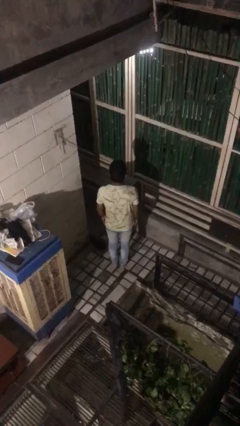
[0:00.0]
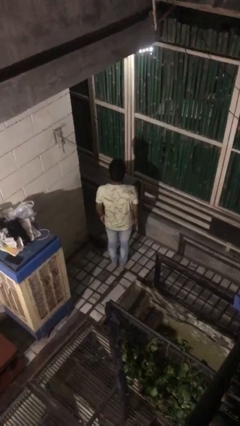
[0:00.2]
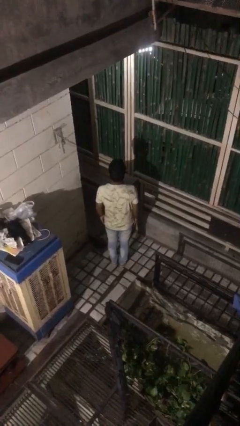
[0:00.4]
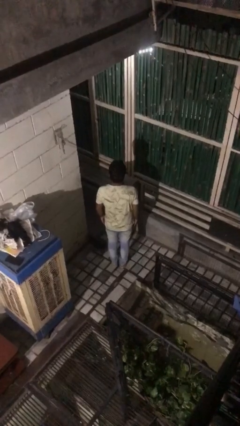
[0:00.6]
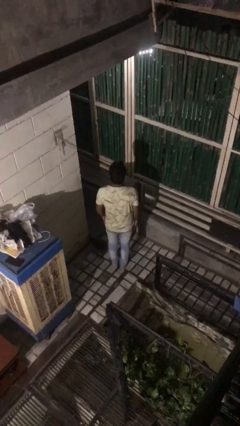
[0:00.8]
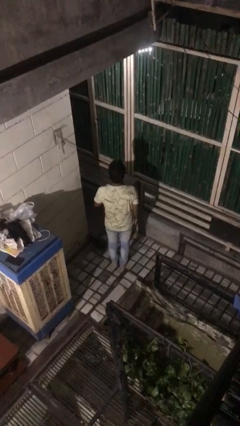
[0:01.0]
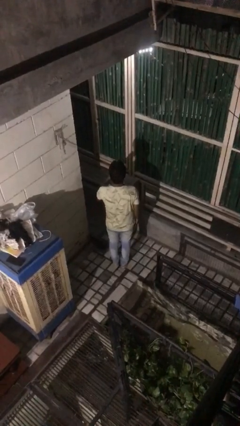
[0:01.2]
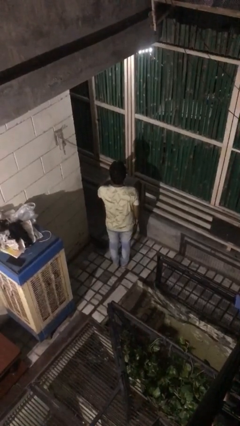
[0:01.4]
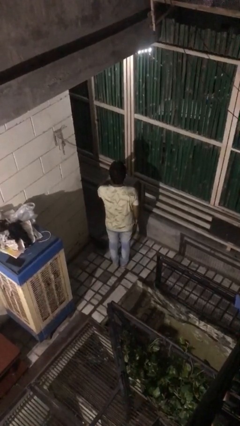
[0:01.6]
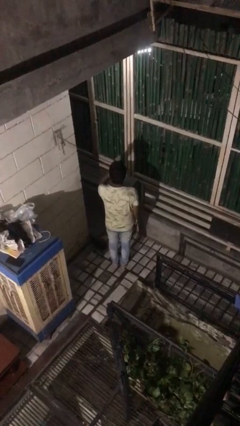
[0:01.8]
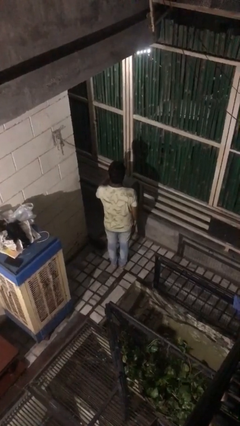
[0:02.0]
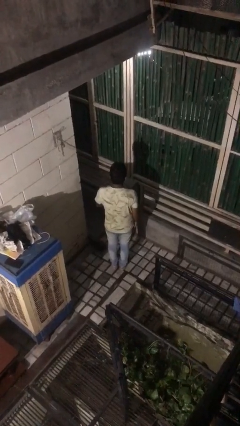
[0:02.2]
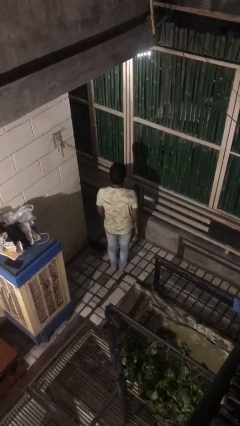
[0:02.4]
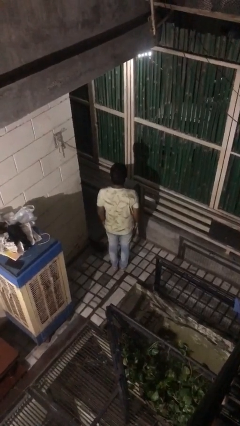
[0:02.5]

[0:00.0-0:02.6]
person gestures blow kiss

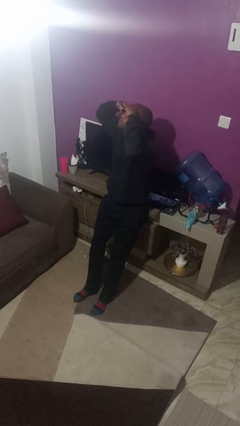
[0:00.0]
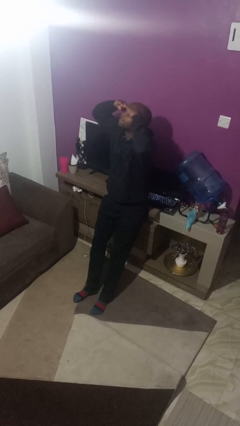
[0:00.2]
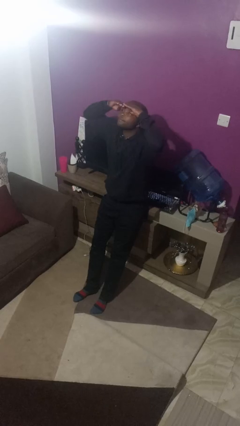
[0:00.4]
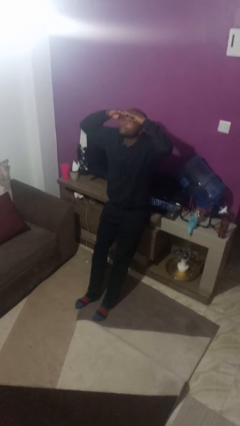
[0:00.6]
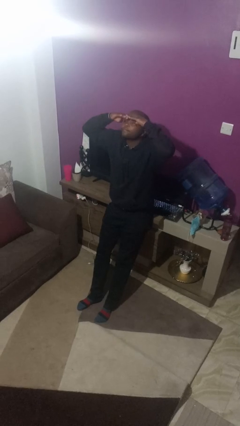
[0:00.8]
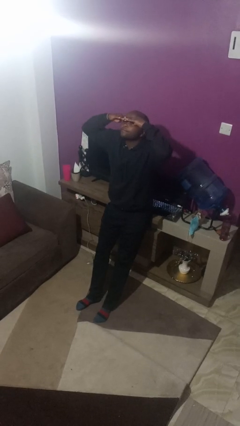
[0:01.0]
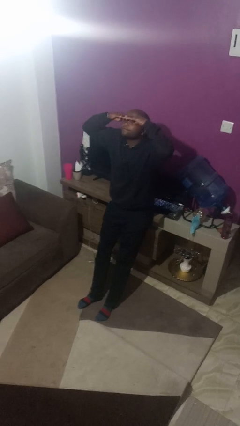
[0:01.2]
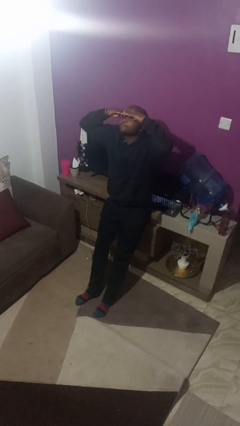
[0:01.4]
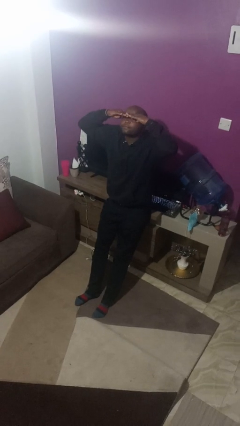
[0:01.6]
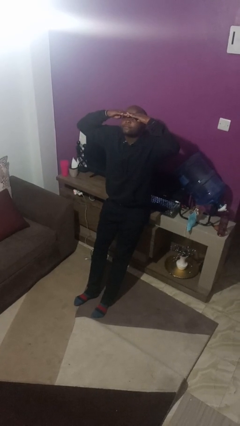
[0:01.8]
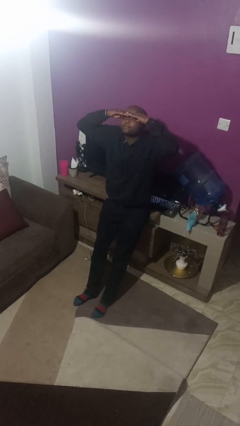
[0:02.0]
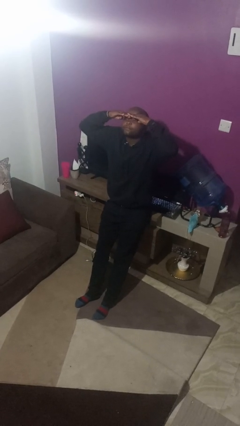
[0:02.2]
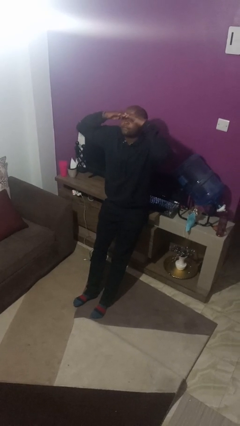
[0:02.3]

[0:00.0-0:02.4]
person shades eyes

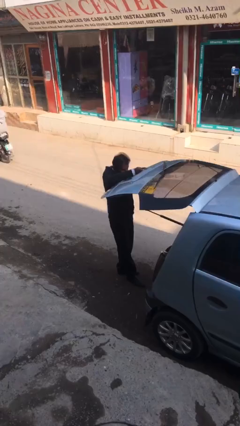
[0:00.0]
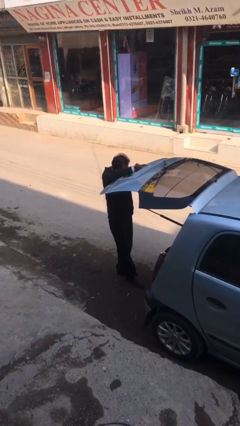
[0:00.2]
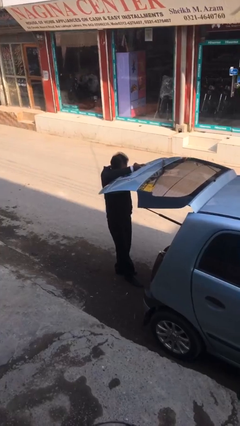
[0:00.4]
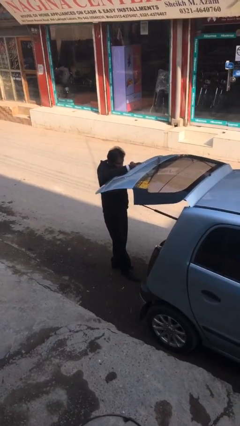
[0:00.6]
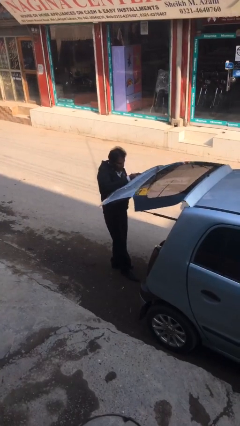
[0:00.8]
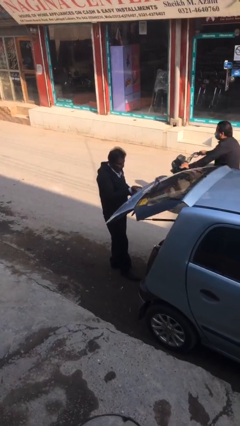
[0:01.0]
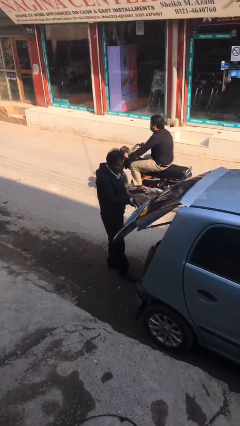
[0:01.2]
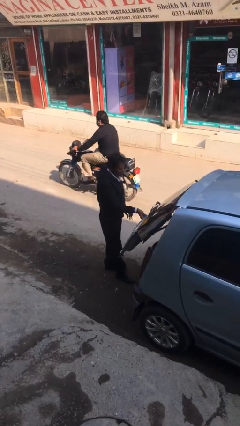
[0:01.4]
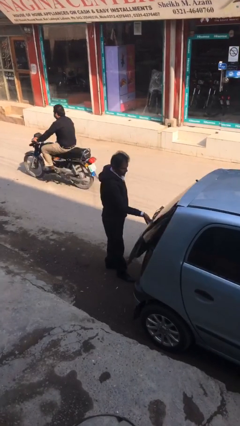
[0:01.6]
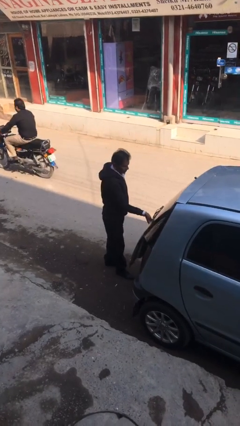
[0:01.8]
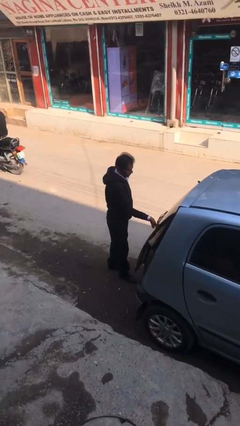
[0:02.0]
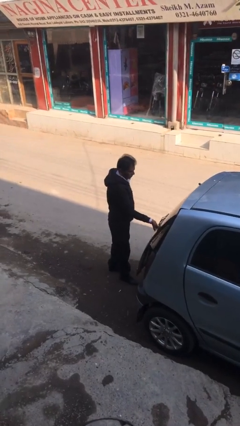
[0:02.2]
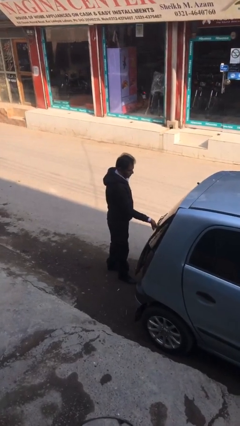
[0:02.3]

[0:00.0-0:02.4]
person closes car trunk

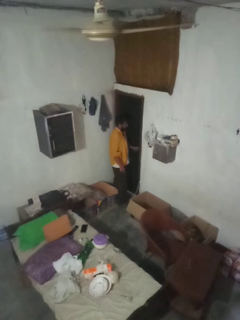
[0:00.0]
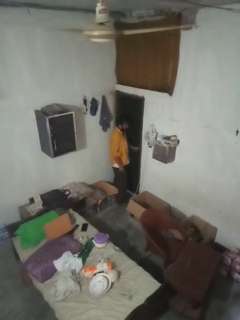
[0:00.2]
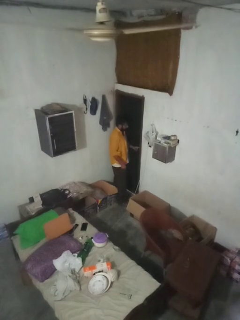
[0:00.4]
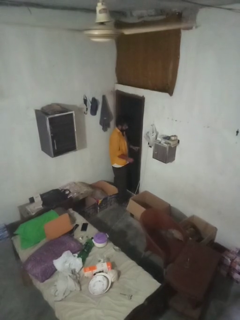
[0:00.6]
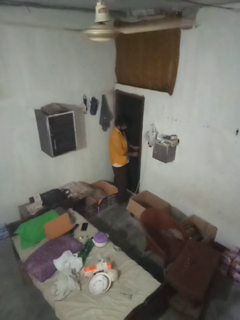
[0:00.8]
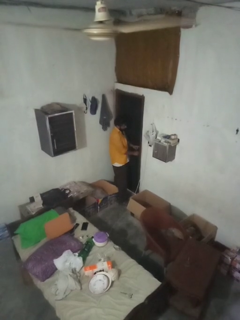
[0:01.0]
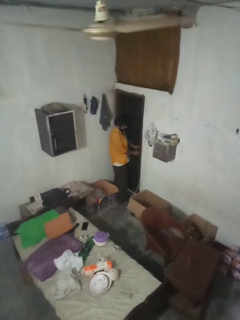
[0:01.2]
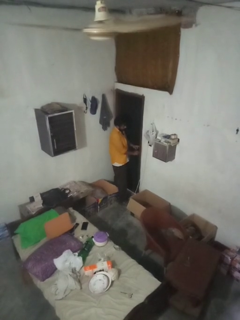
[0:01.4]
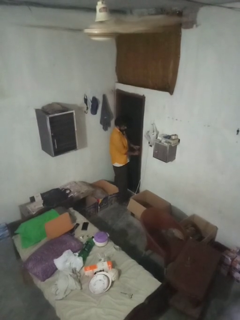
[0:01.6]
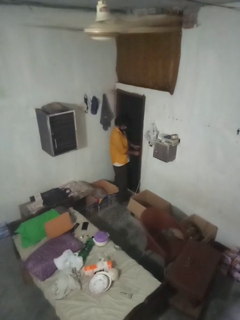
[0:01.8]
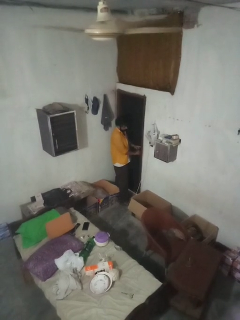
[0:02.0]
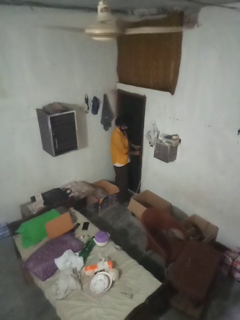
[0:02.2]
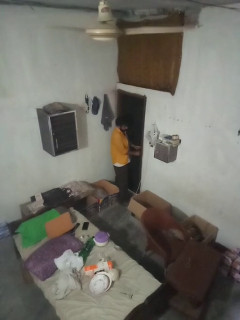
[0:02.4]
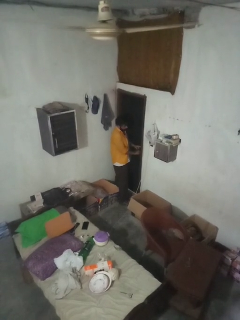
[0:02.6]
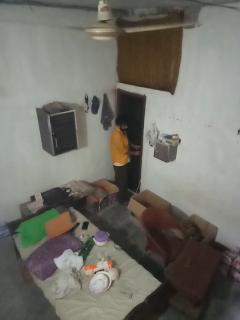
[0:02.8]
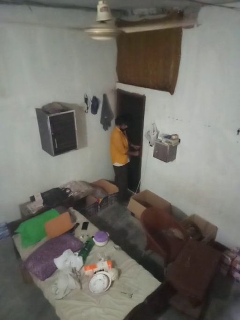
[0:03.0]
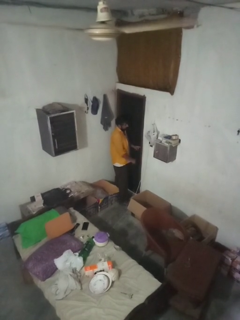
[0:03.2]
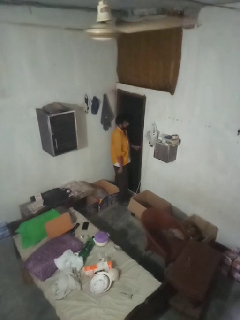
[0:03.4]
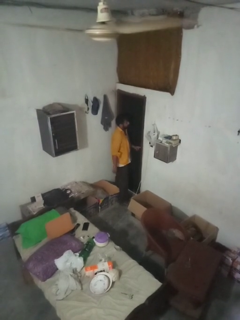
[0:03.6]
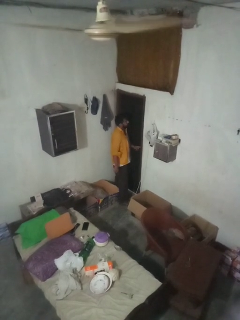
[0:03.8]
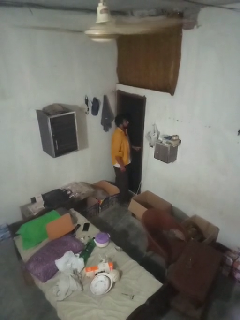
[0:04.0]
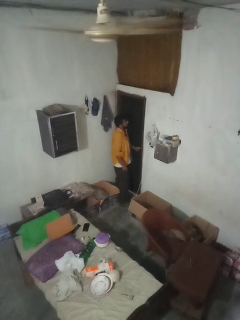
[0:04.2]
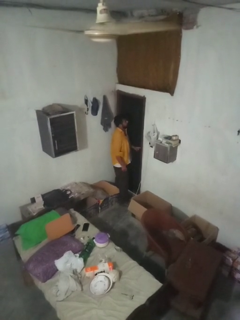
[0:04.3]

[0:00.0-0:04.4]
person locks door with keys

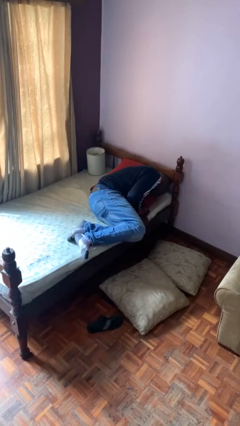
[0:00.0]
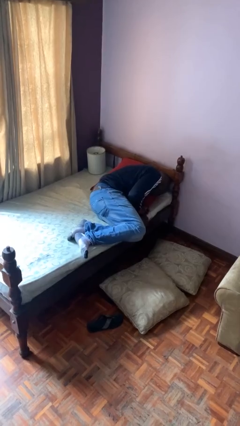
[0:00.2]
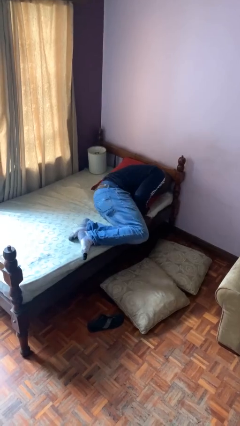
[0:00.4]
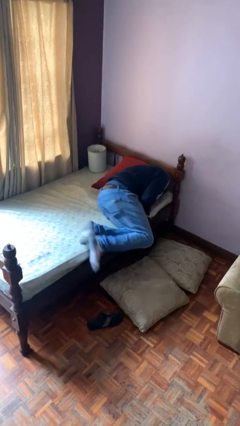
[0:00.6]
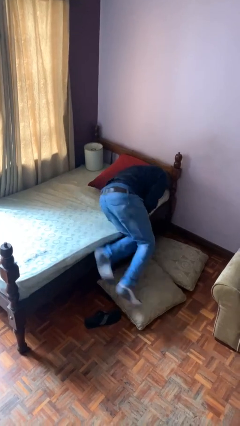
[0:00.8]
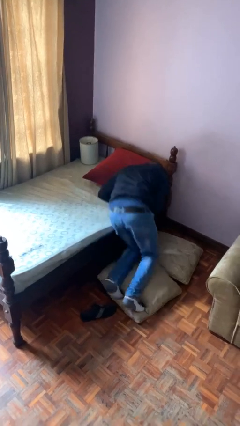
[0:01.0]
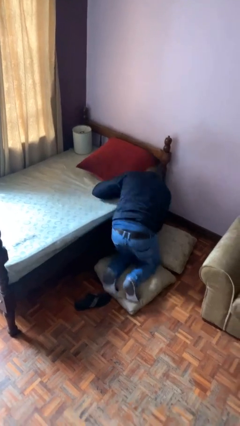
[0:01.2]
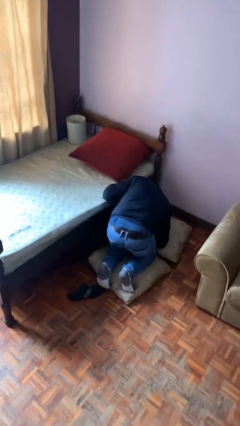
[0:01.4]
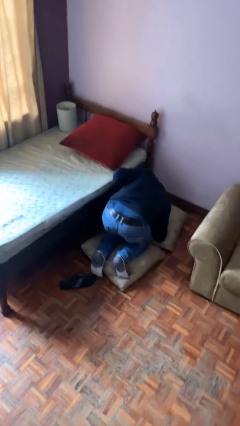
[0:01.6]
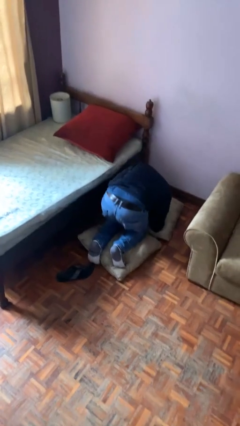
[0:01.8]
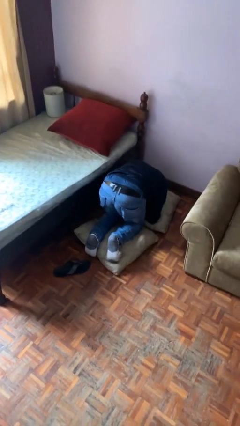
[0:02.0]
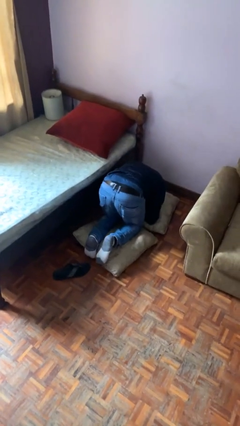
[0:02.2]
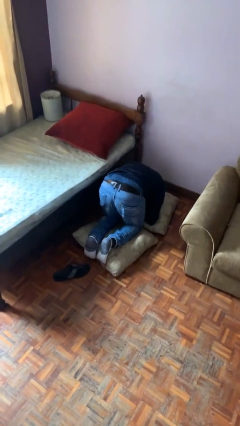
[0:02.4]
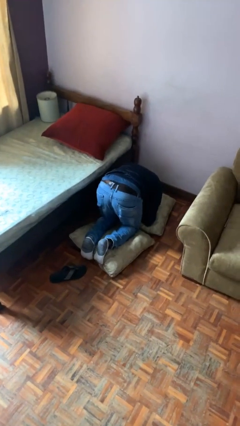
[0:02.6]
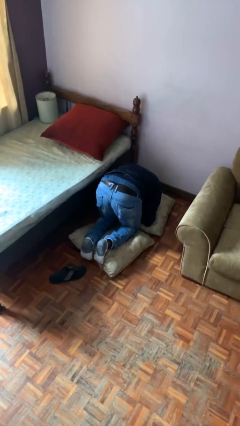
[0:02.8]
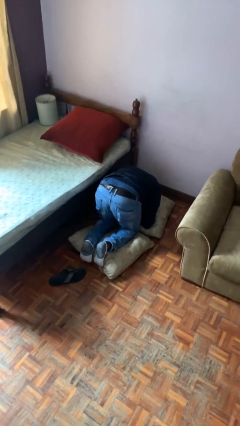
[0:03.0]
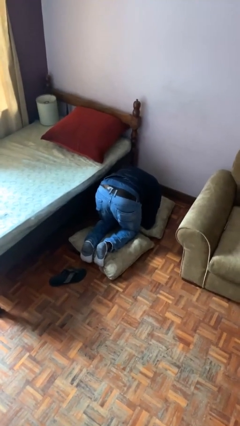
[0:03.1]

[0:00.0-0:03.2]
person falls from bed

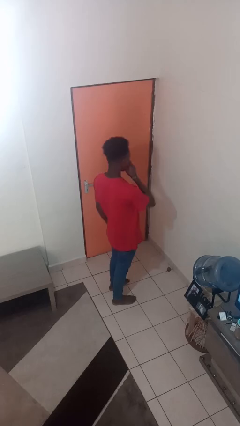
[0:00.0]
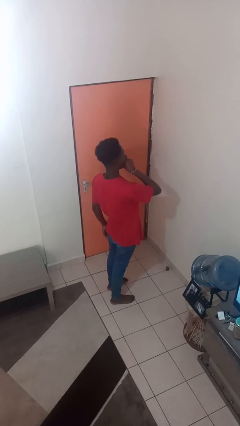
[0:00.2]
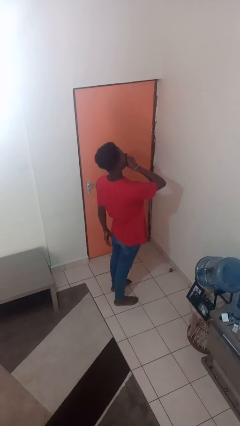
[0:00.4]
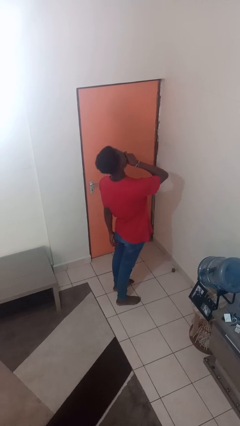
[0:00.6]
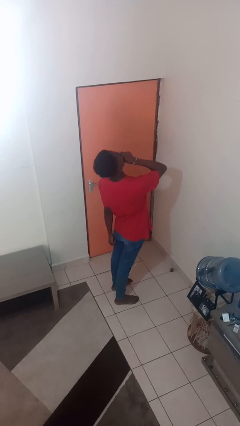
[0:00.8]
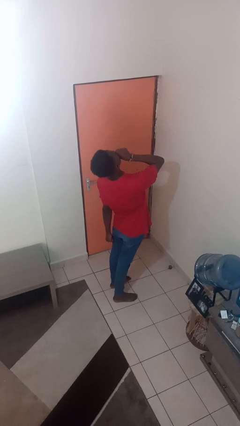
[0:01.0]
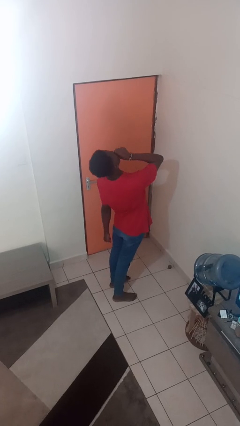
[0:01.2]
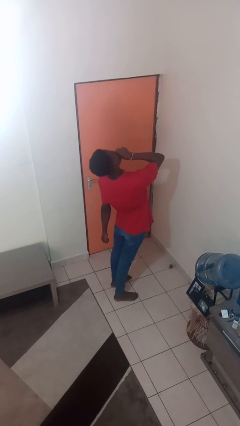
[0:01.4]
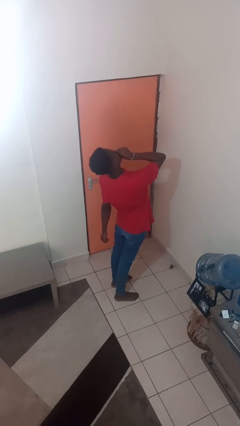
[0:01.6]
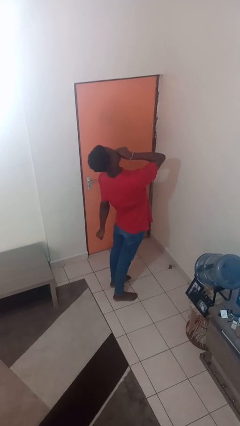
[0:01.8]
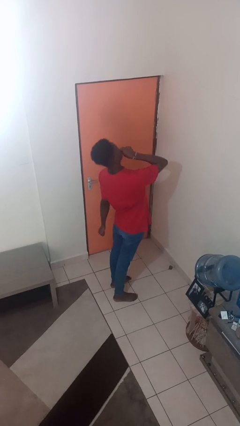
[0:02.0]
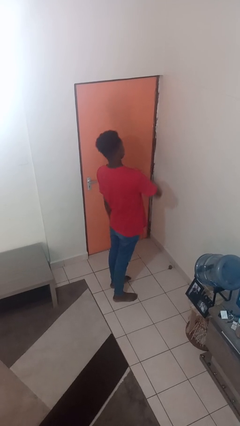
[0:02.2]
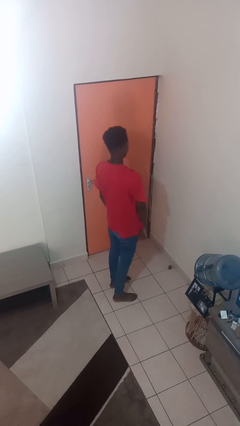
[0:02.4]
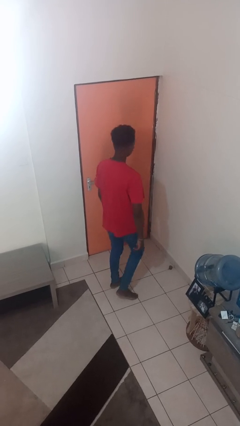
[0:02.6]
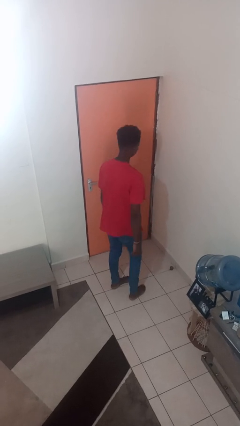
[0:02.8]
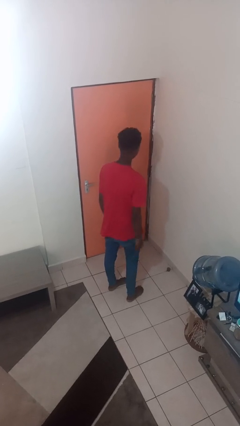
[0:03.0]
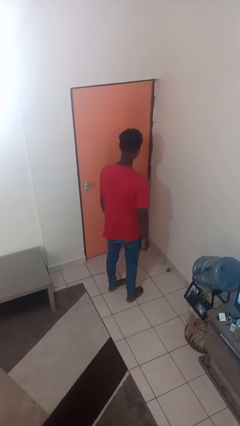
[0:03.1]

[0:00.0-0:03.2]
person yawns

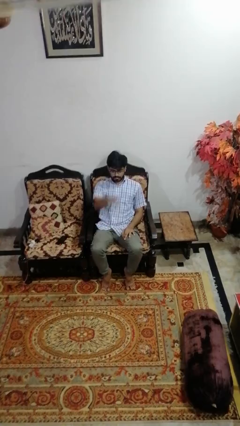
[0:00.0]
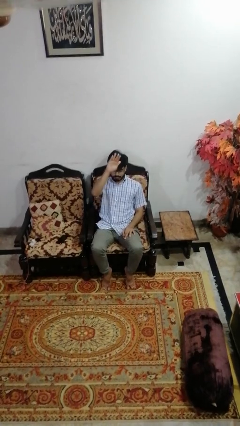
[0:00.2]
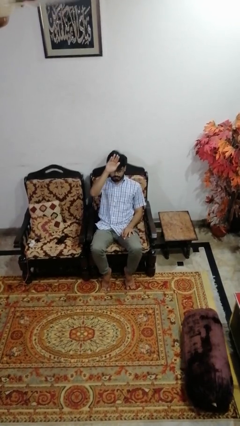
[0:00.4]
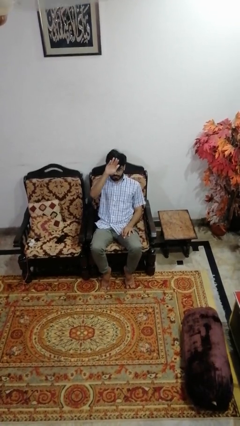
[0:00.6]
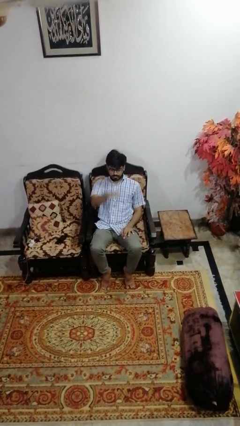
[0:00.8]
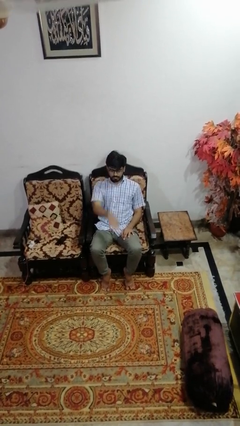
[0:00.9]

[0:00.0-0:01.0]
person gestures swipe up
